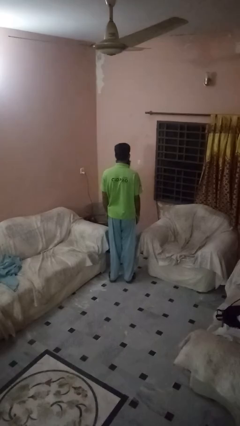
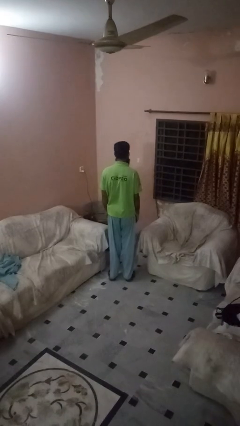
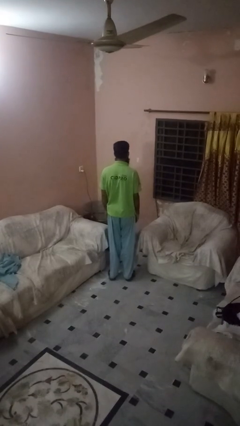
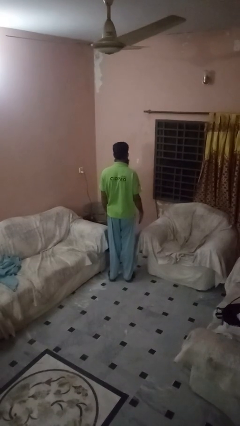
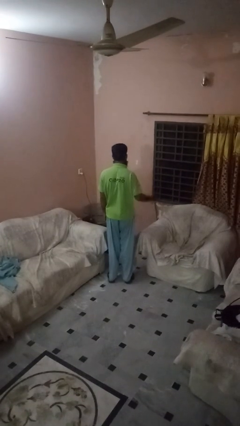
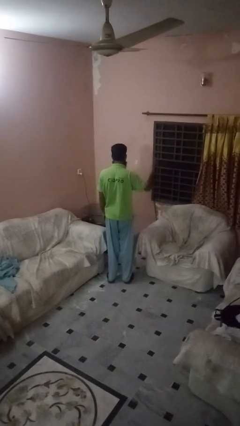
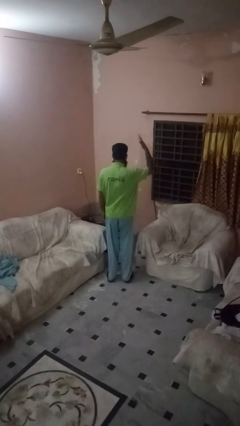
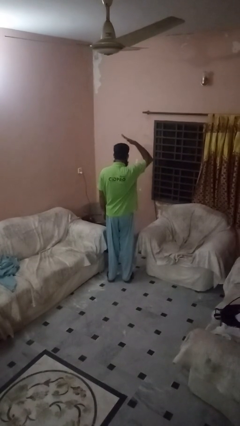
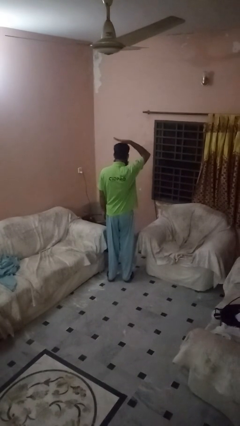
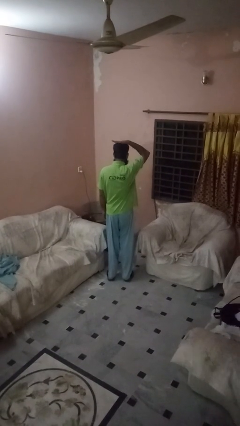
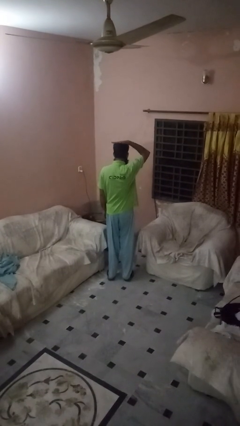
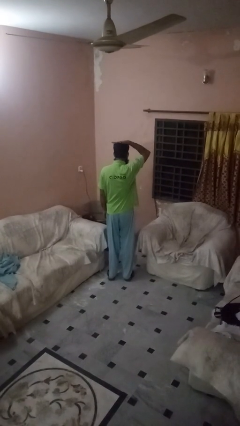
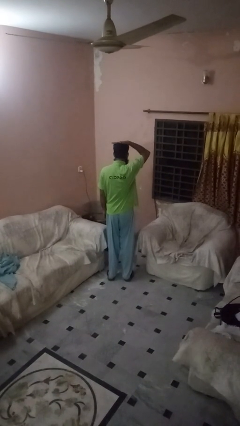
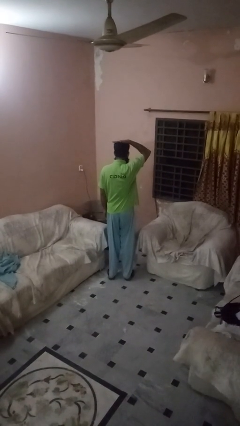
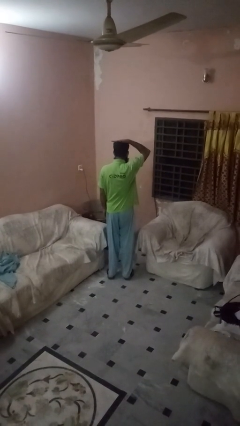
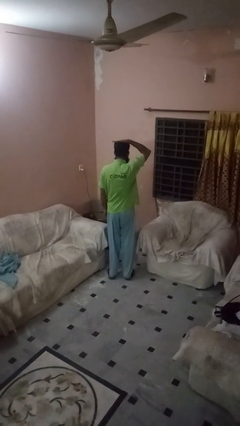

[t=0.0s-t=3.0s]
person pats head

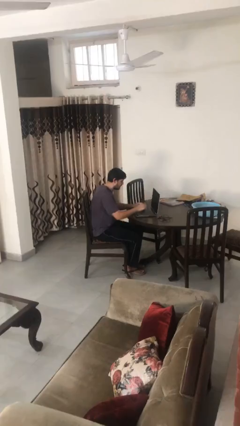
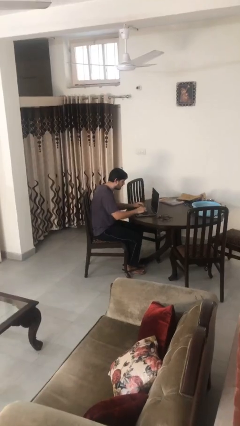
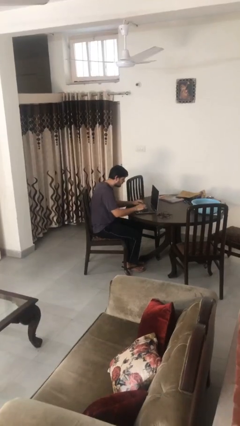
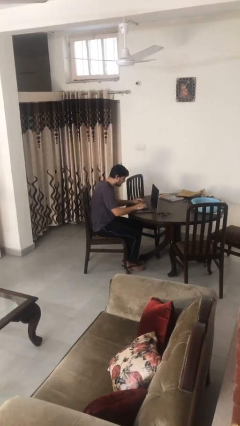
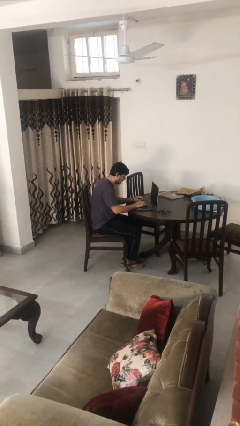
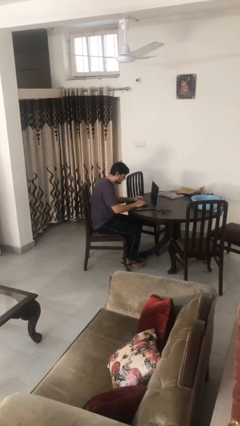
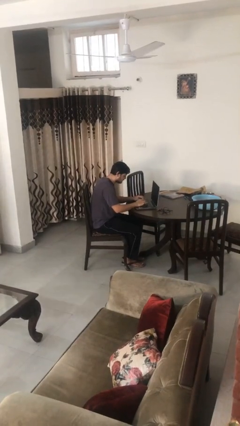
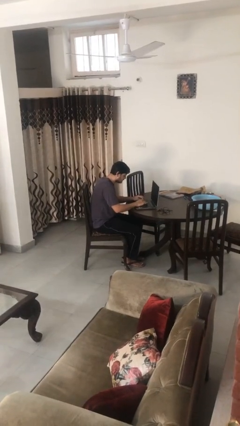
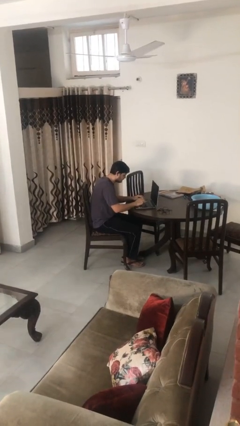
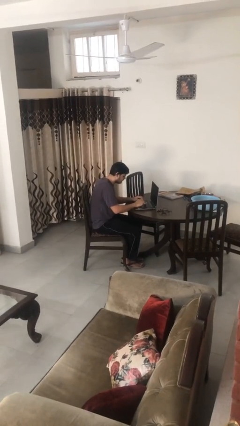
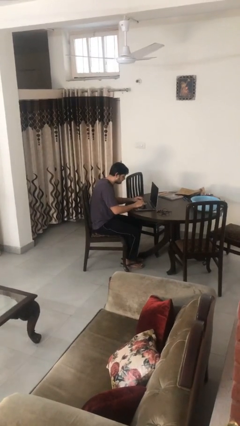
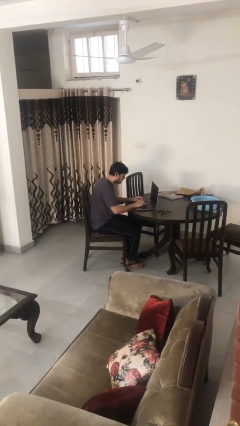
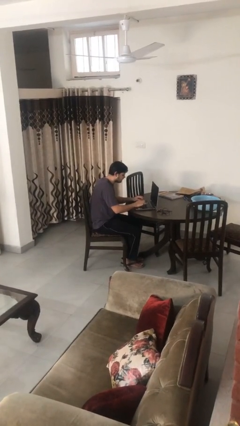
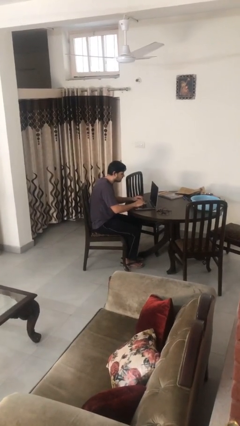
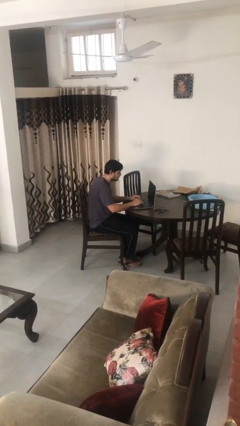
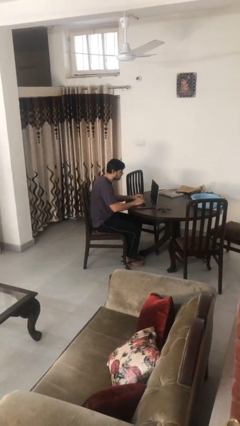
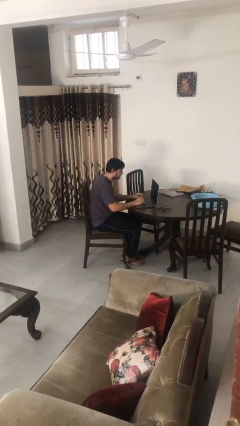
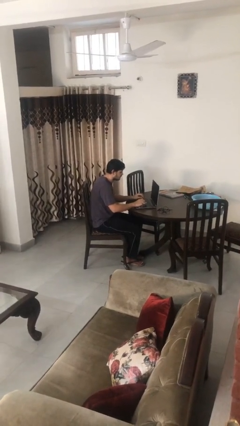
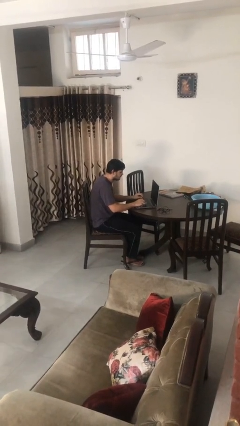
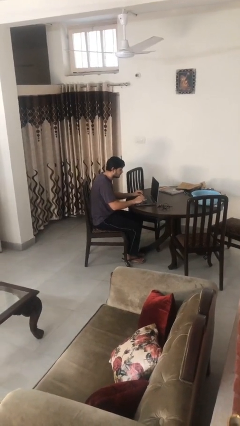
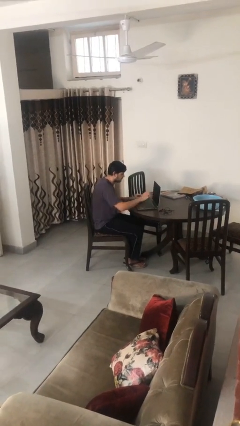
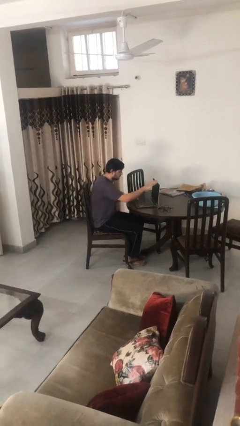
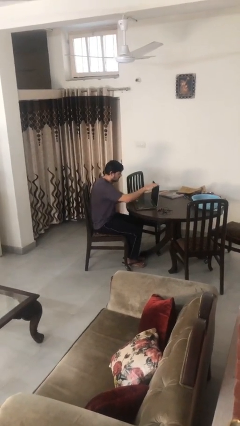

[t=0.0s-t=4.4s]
person interacts with laptop

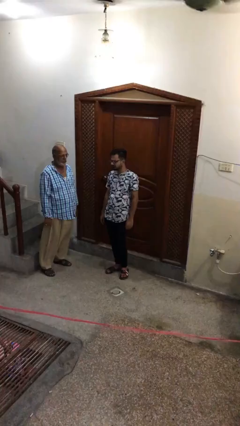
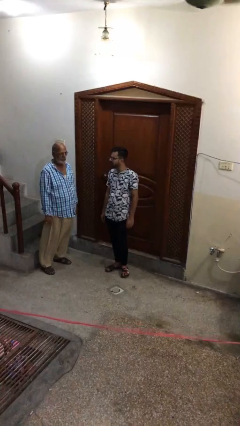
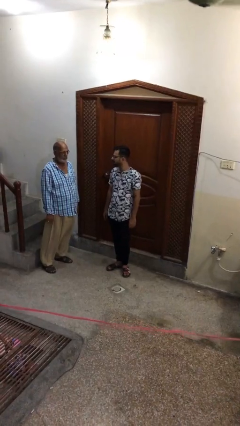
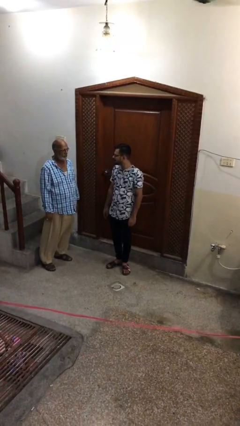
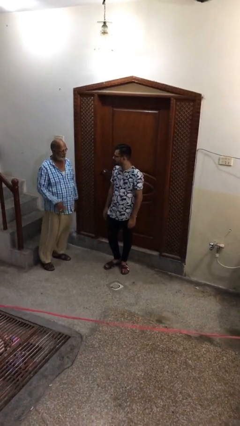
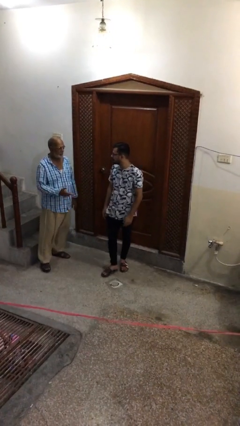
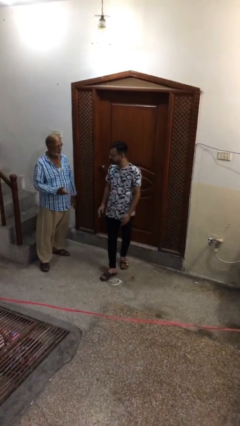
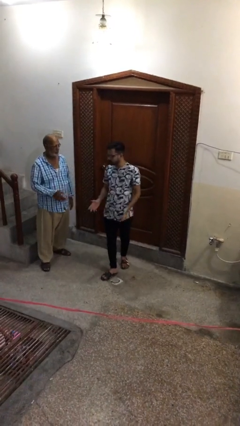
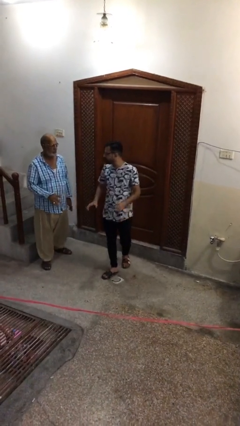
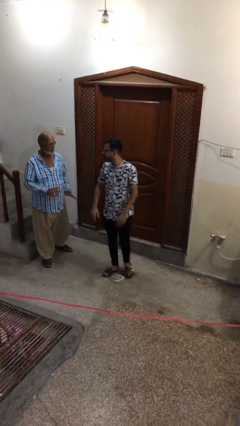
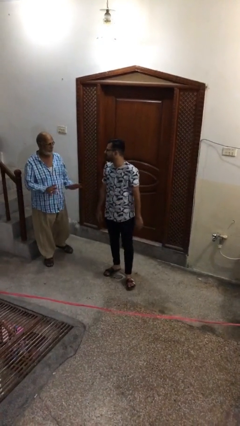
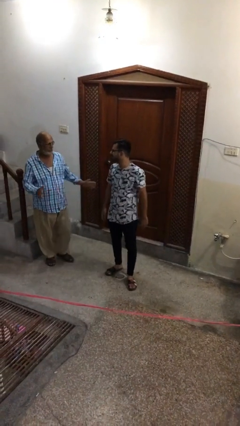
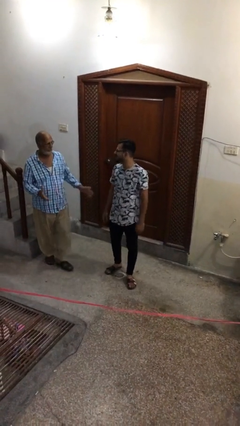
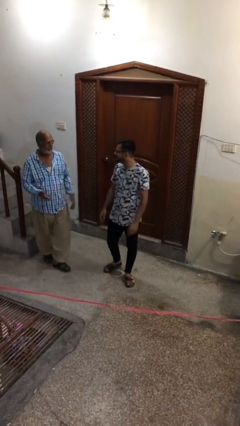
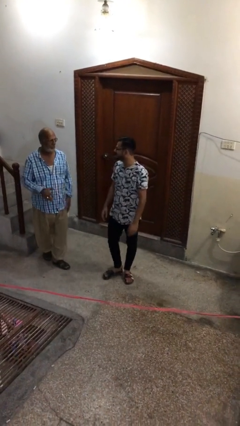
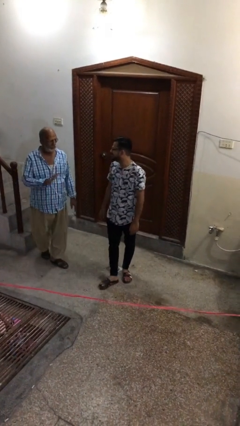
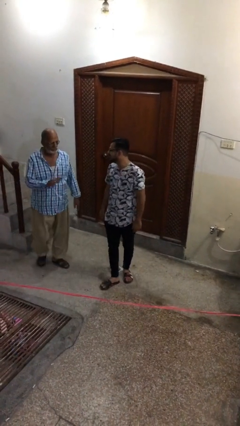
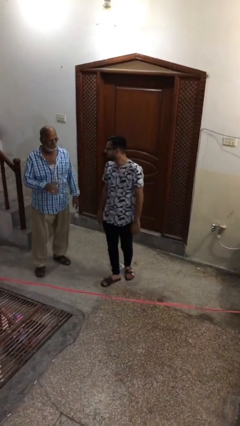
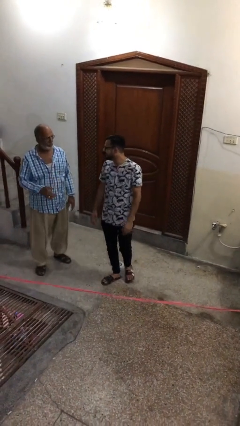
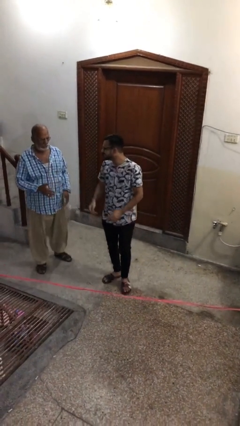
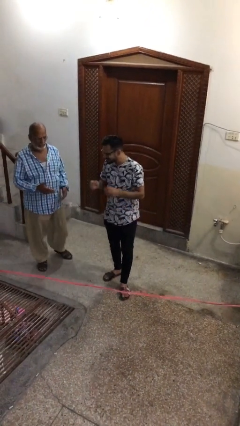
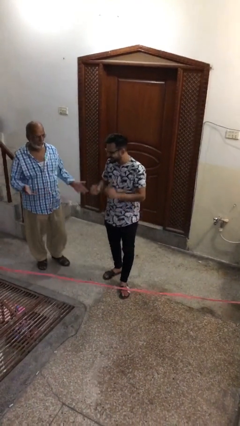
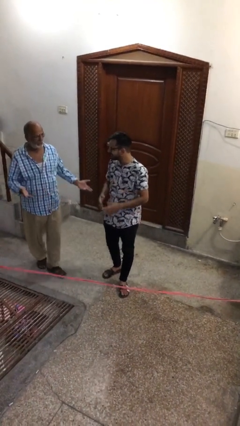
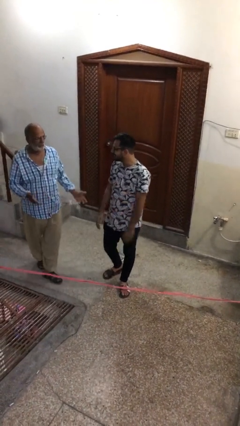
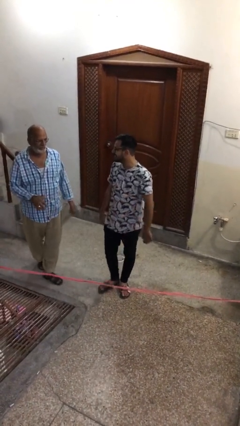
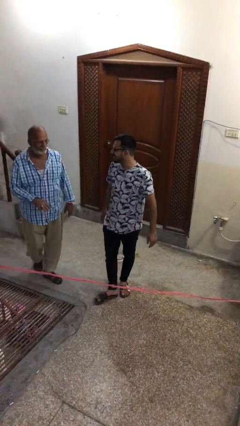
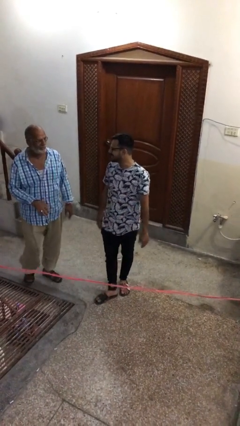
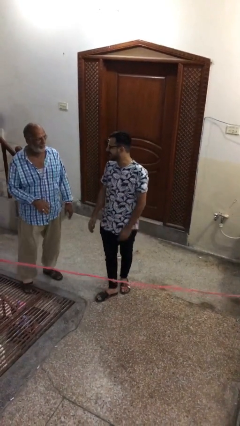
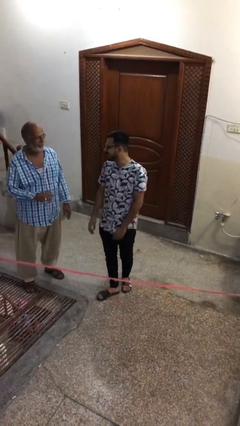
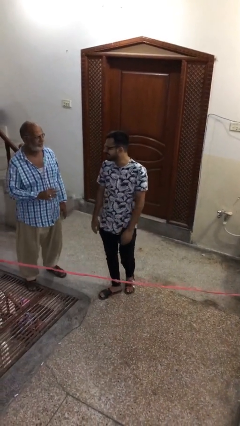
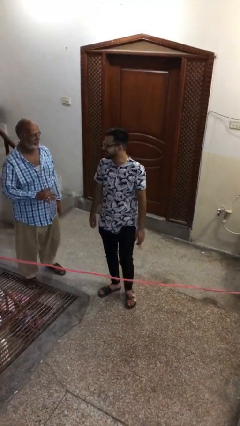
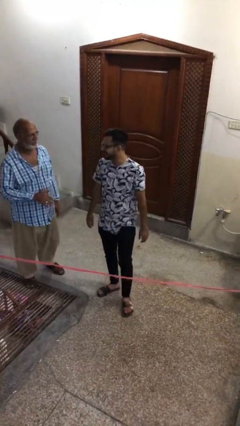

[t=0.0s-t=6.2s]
person talks to person

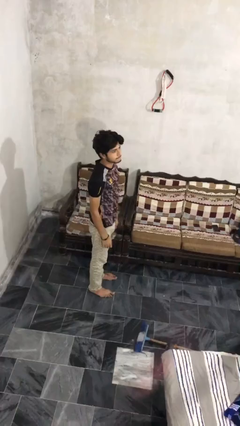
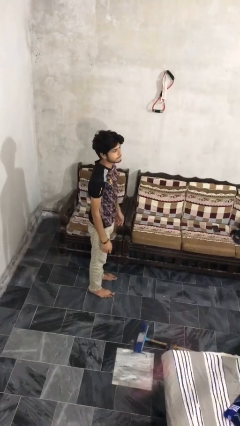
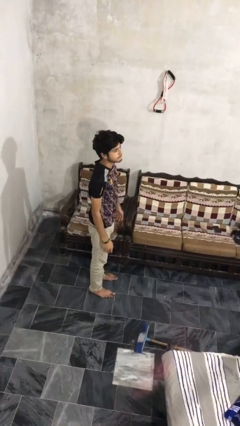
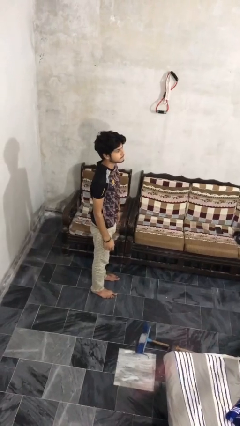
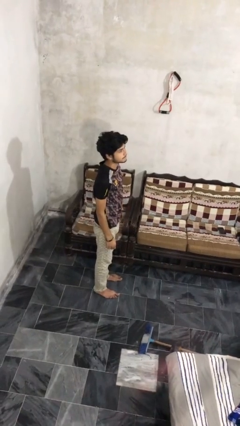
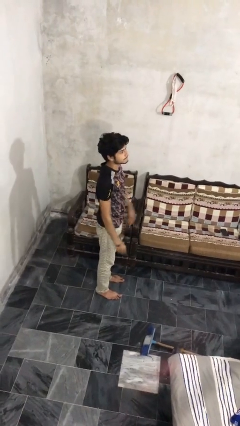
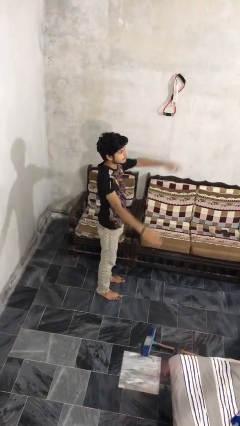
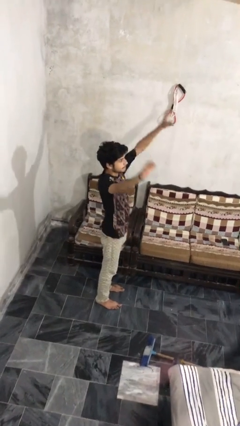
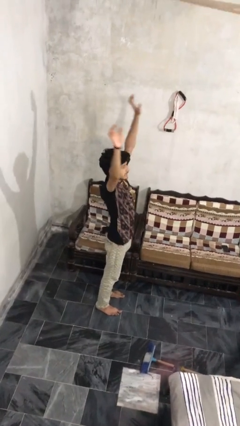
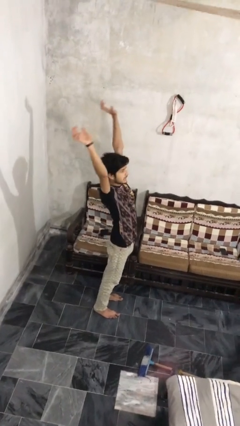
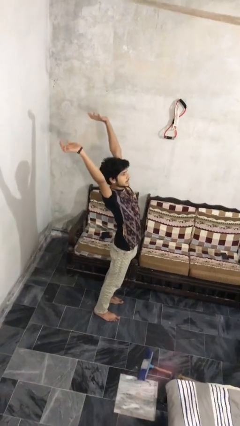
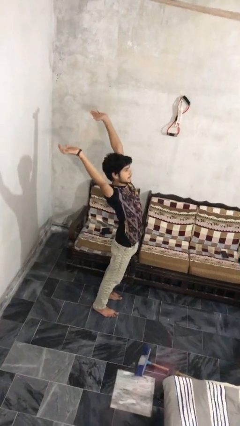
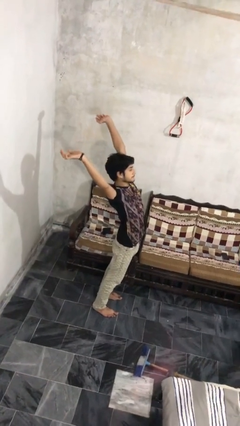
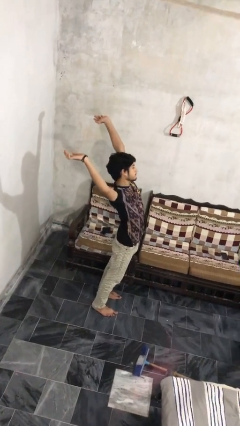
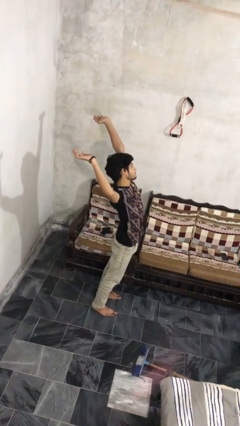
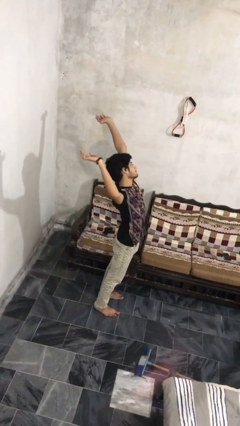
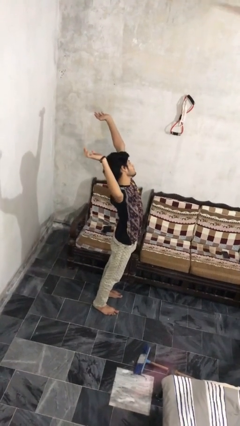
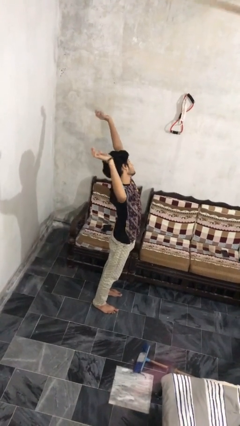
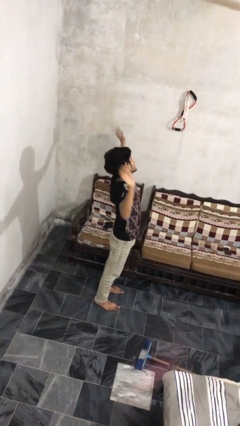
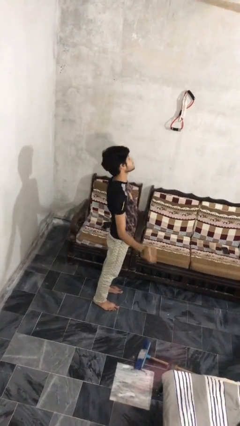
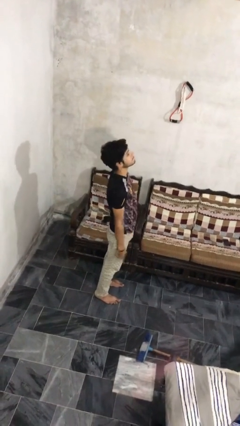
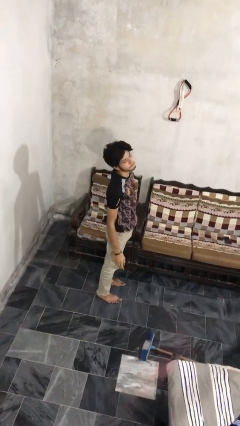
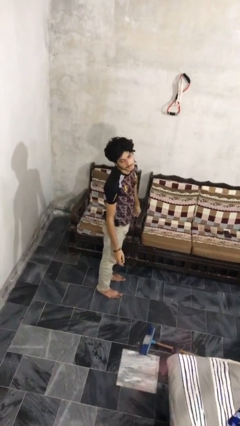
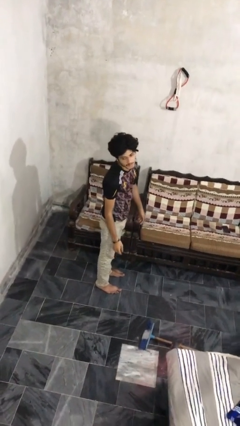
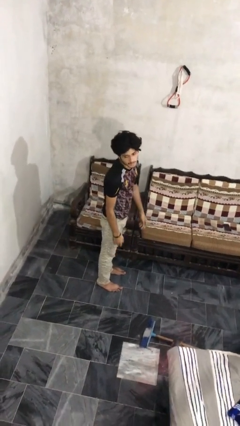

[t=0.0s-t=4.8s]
person stretches arms over head
